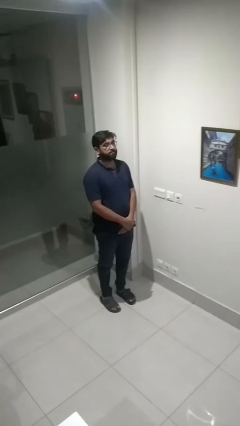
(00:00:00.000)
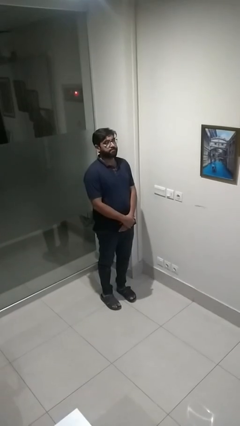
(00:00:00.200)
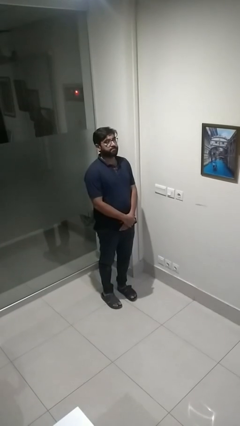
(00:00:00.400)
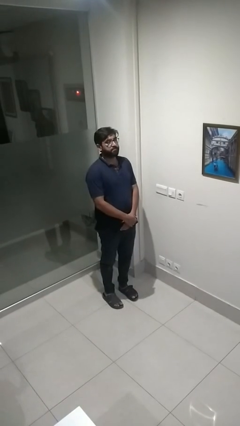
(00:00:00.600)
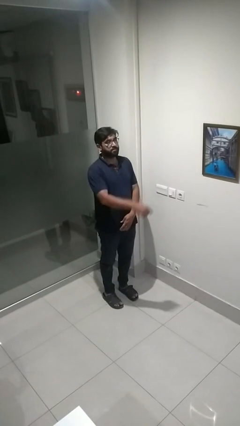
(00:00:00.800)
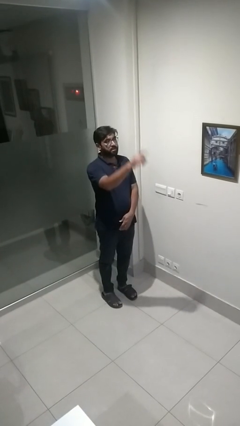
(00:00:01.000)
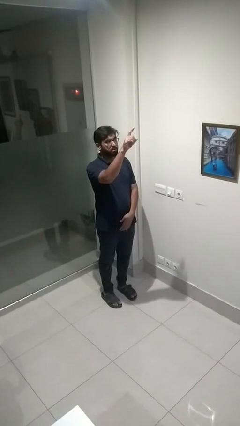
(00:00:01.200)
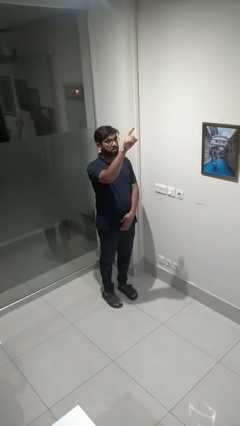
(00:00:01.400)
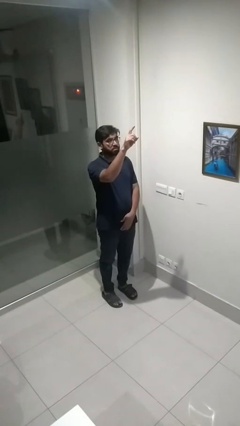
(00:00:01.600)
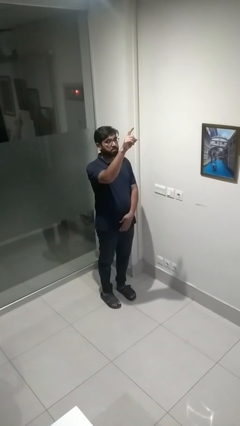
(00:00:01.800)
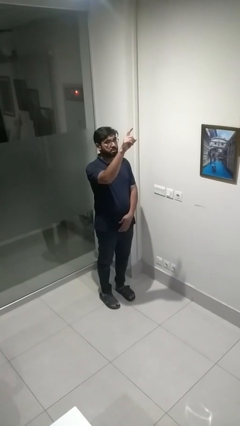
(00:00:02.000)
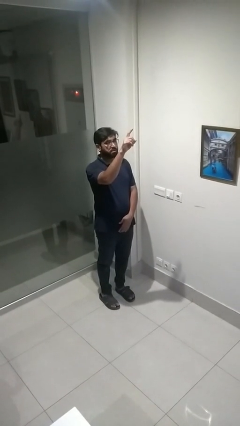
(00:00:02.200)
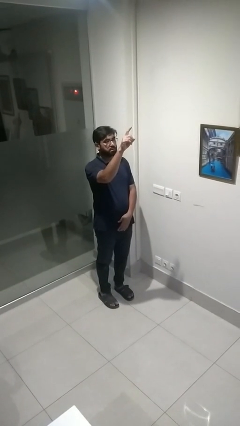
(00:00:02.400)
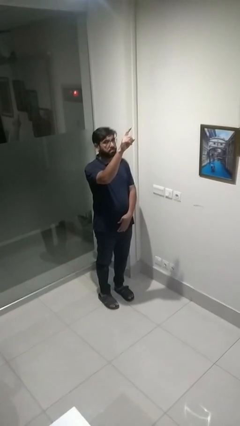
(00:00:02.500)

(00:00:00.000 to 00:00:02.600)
person gestures raise hand

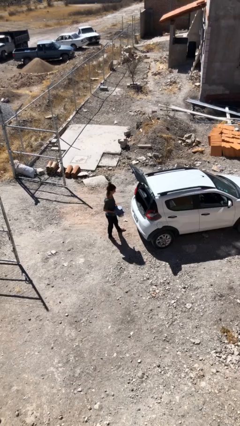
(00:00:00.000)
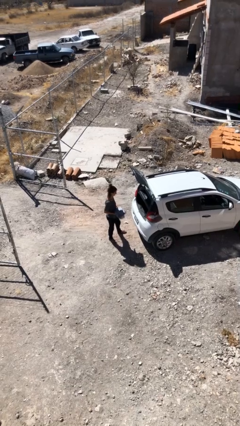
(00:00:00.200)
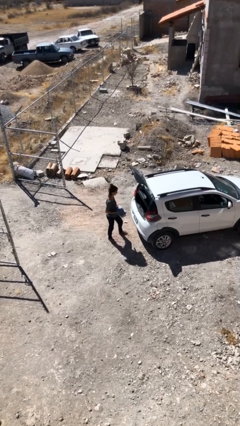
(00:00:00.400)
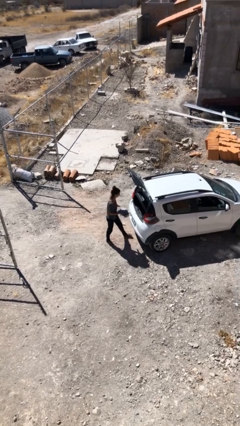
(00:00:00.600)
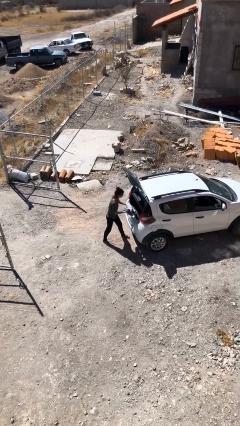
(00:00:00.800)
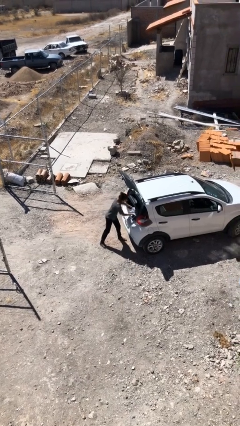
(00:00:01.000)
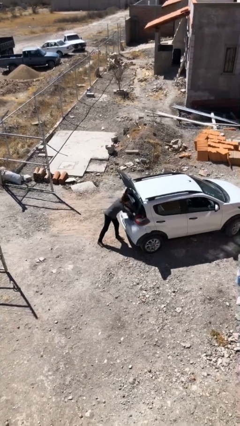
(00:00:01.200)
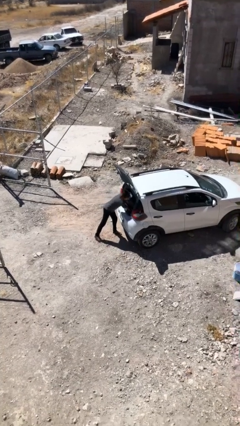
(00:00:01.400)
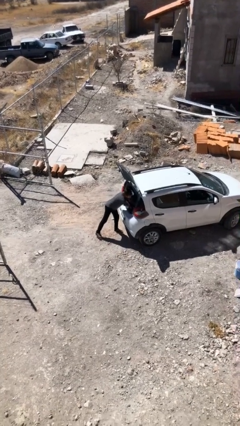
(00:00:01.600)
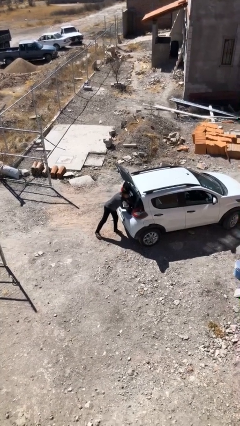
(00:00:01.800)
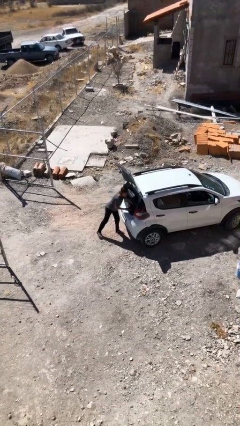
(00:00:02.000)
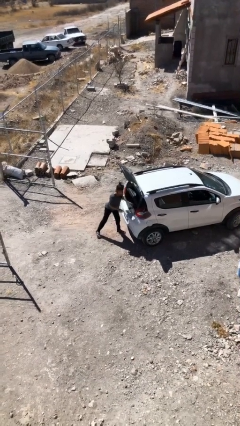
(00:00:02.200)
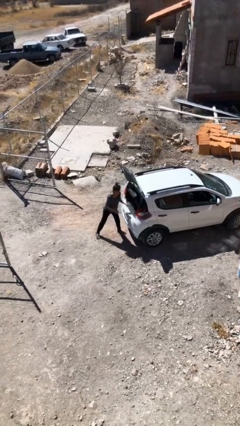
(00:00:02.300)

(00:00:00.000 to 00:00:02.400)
person loads car

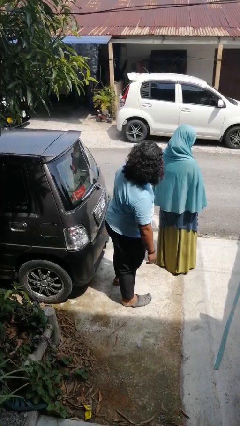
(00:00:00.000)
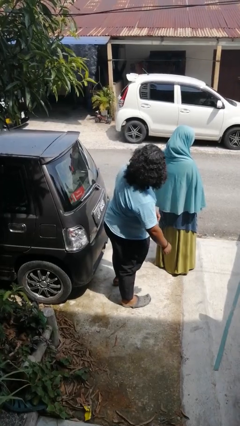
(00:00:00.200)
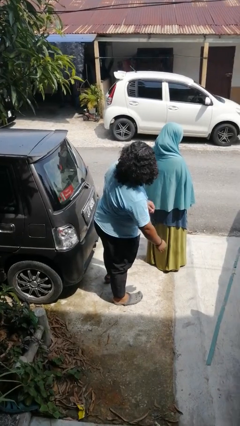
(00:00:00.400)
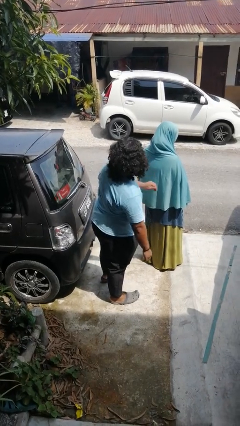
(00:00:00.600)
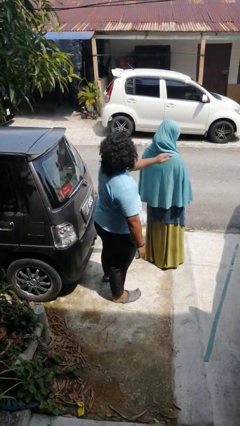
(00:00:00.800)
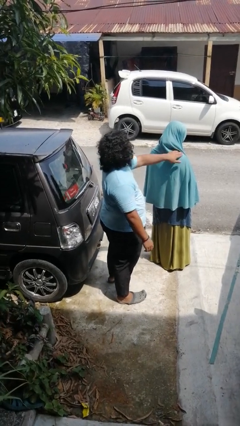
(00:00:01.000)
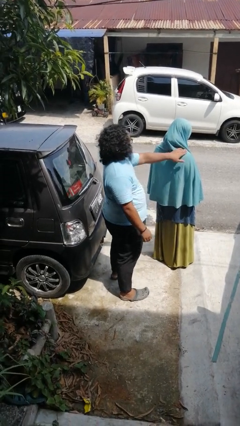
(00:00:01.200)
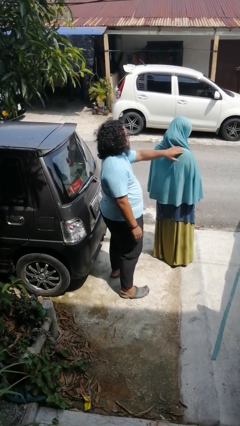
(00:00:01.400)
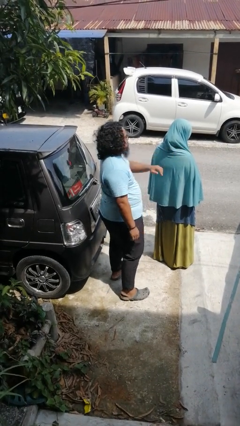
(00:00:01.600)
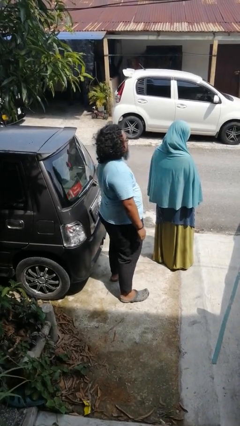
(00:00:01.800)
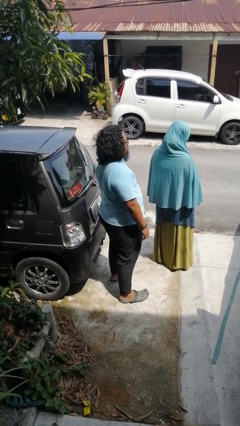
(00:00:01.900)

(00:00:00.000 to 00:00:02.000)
person touches back of person

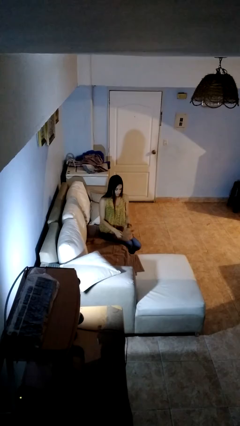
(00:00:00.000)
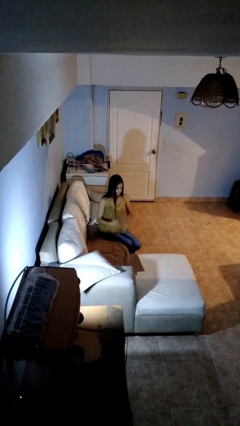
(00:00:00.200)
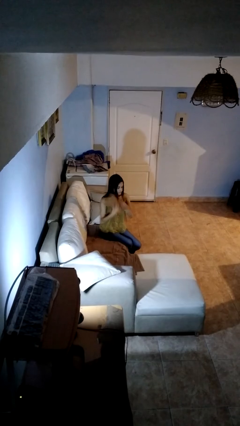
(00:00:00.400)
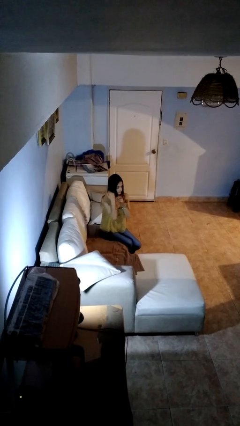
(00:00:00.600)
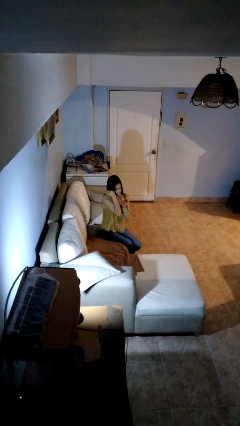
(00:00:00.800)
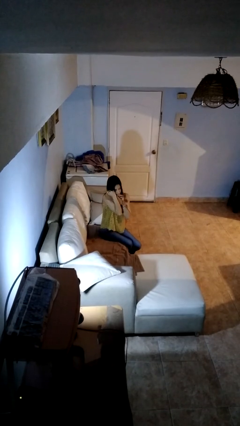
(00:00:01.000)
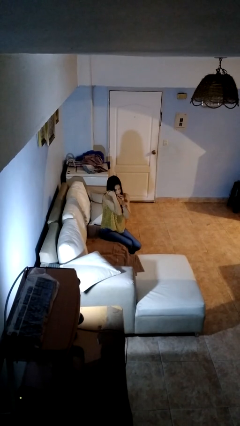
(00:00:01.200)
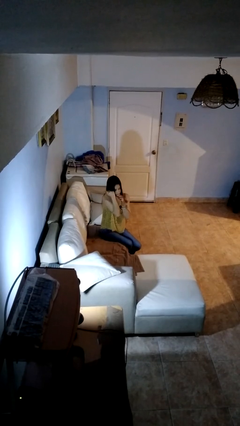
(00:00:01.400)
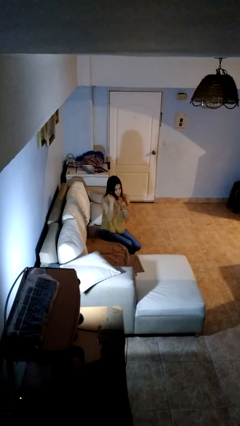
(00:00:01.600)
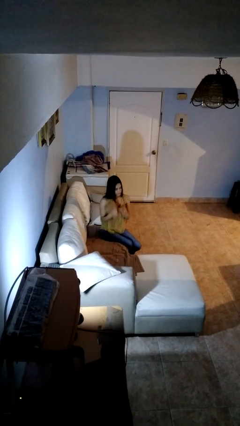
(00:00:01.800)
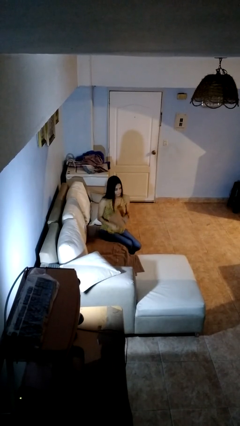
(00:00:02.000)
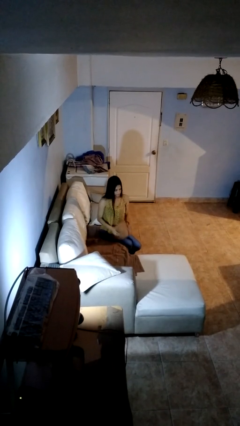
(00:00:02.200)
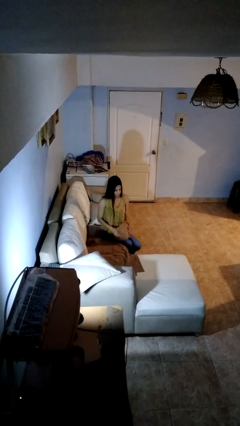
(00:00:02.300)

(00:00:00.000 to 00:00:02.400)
person hugs stuffed animal

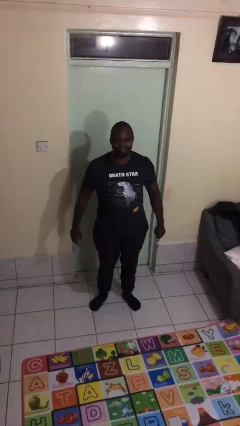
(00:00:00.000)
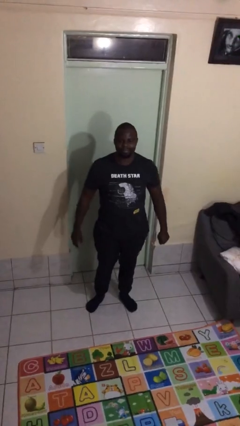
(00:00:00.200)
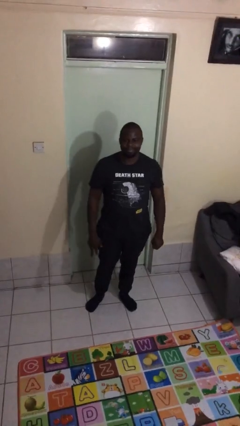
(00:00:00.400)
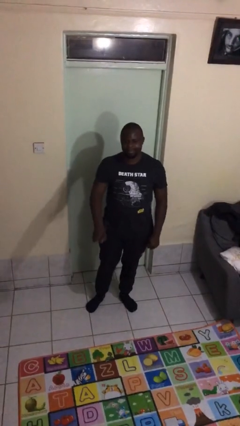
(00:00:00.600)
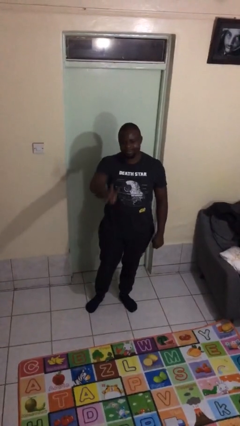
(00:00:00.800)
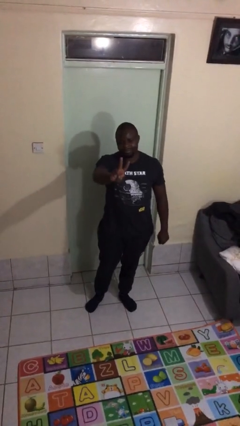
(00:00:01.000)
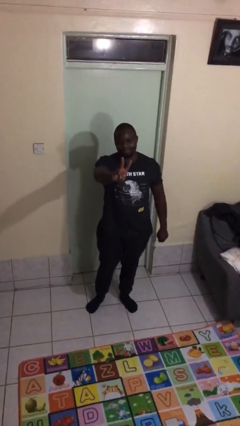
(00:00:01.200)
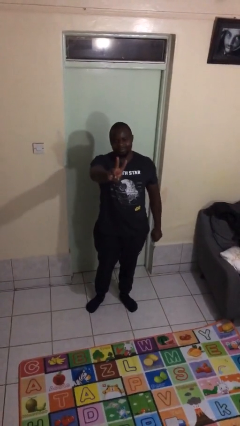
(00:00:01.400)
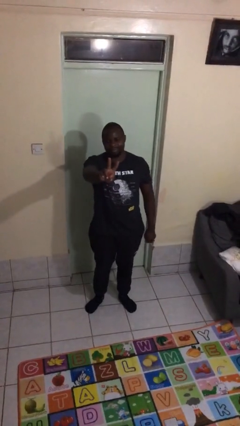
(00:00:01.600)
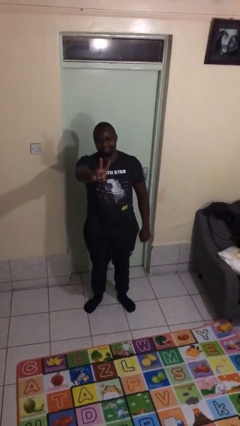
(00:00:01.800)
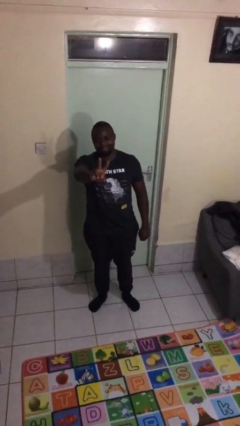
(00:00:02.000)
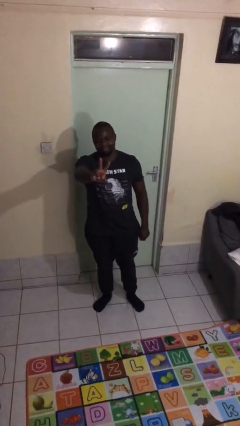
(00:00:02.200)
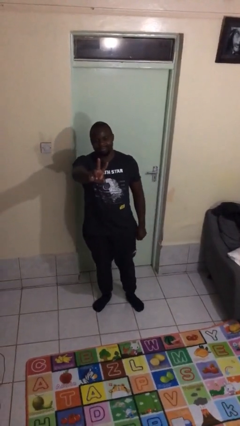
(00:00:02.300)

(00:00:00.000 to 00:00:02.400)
person gestures peace

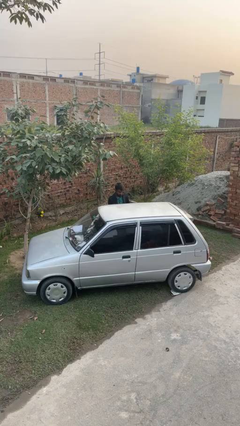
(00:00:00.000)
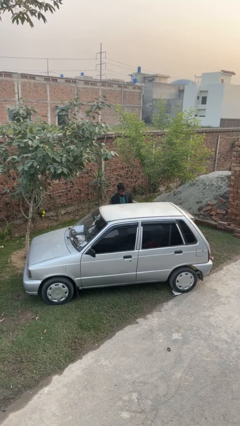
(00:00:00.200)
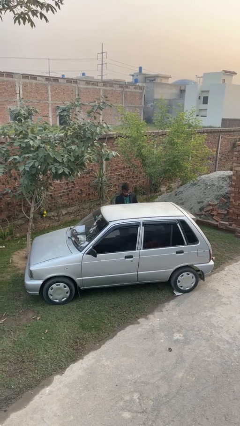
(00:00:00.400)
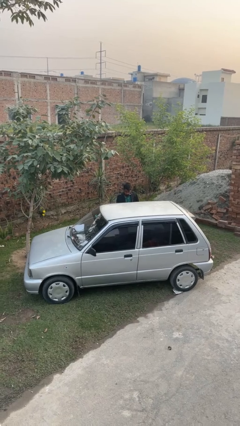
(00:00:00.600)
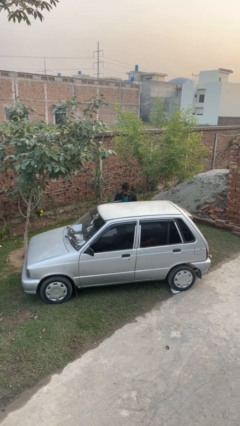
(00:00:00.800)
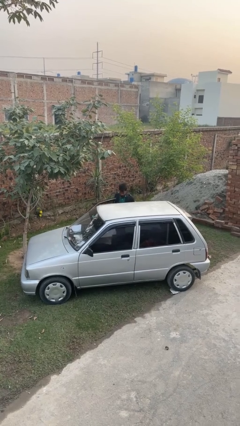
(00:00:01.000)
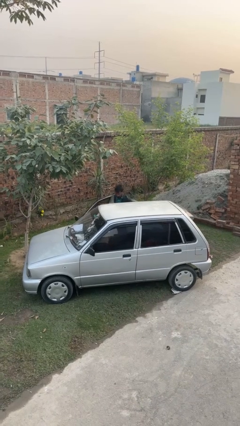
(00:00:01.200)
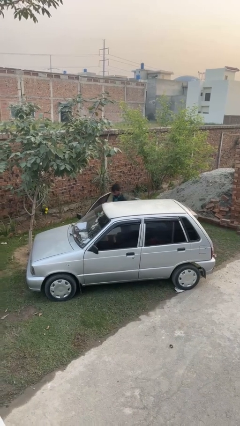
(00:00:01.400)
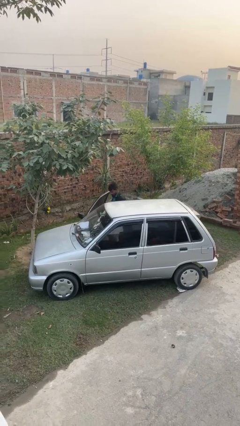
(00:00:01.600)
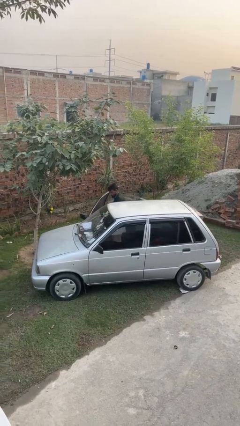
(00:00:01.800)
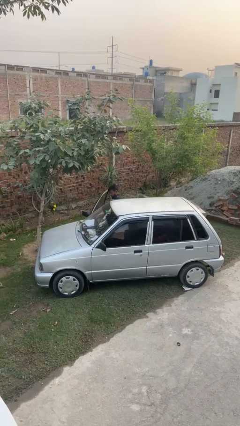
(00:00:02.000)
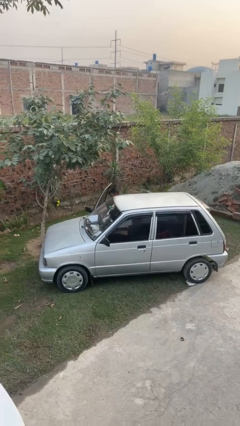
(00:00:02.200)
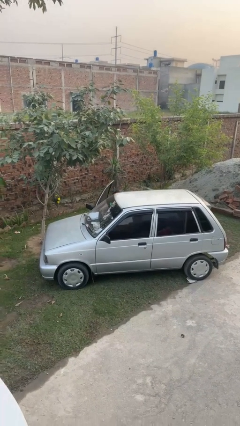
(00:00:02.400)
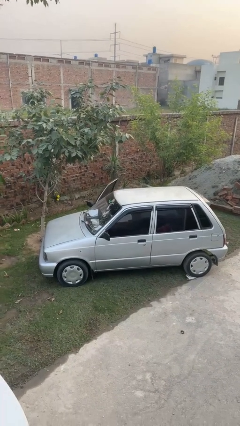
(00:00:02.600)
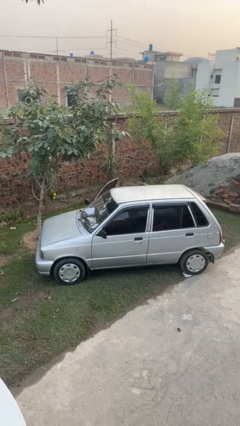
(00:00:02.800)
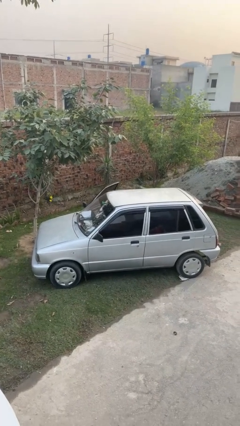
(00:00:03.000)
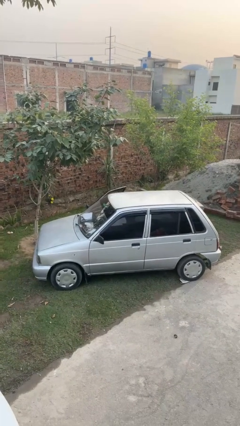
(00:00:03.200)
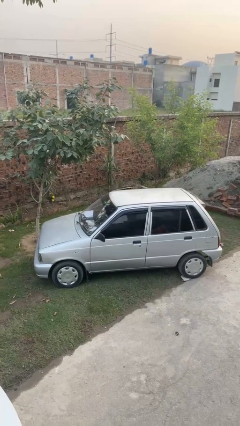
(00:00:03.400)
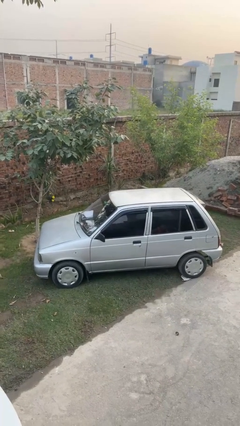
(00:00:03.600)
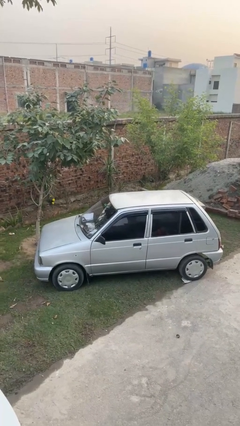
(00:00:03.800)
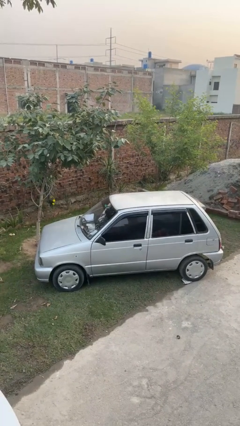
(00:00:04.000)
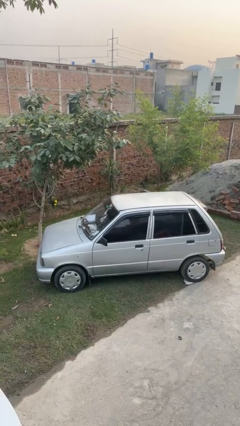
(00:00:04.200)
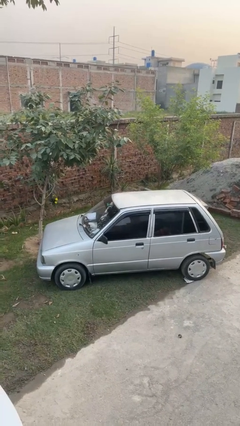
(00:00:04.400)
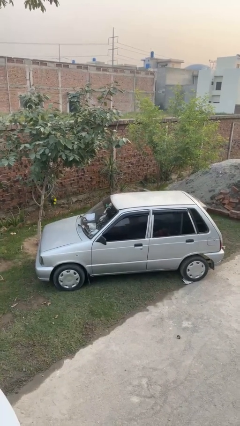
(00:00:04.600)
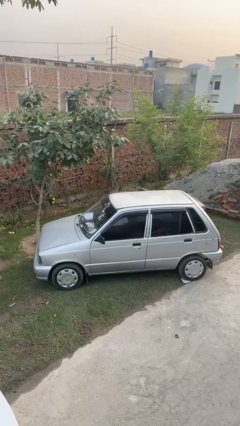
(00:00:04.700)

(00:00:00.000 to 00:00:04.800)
person enters car

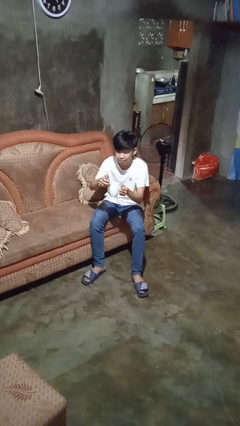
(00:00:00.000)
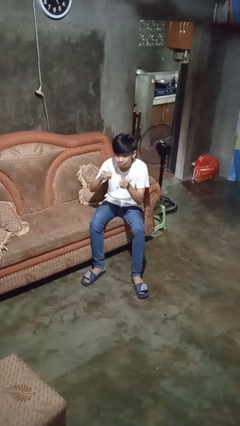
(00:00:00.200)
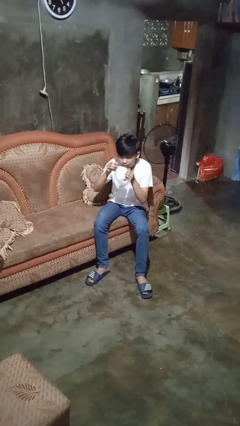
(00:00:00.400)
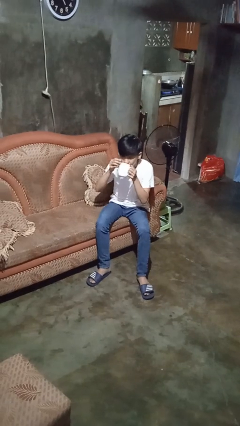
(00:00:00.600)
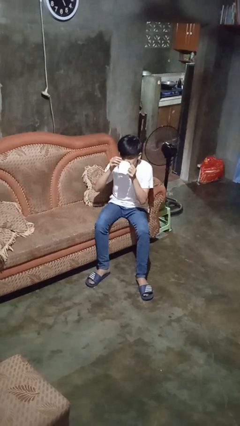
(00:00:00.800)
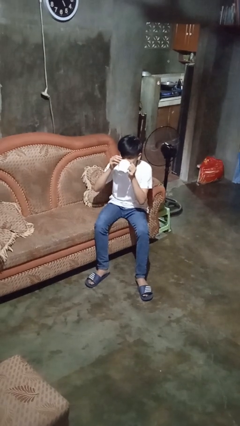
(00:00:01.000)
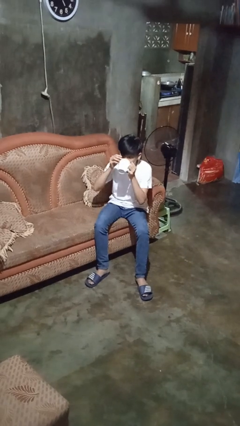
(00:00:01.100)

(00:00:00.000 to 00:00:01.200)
person drinks from mug
